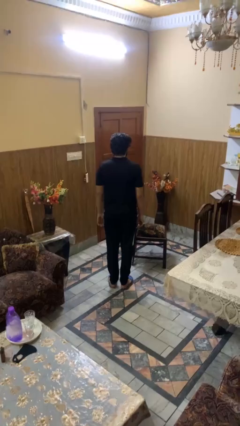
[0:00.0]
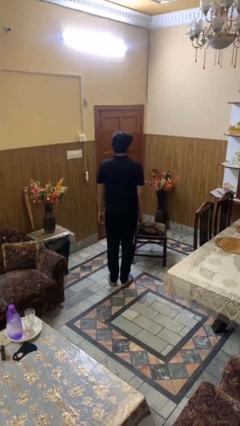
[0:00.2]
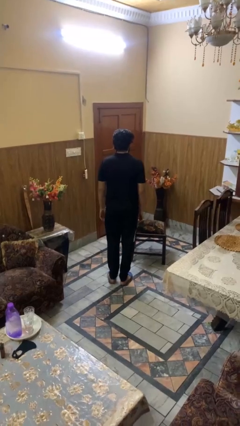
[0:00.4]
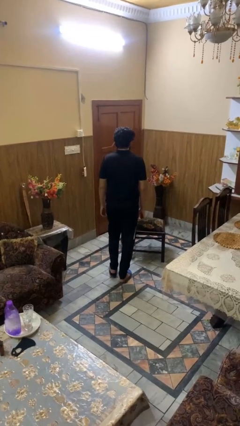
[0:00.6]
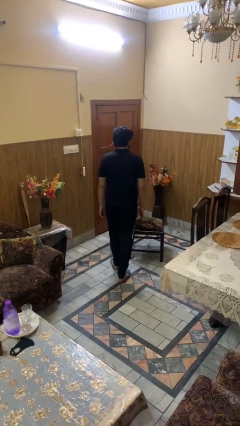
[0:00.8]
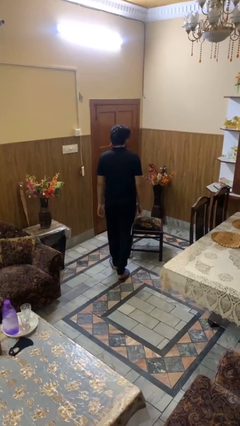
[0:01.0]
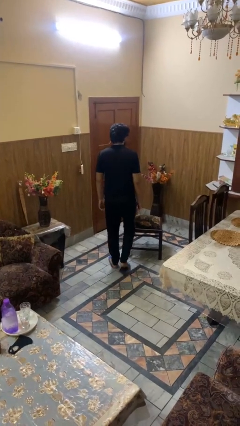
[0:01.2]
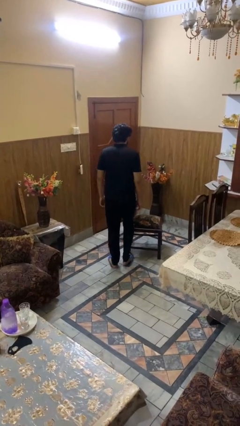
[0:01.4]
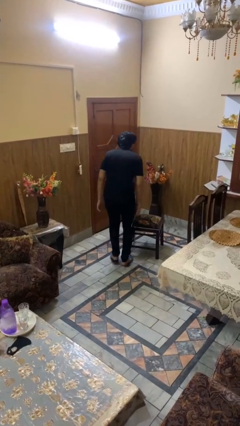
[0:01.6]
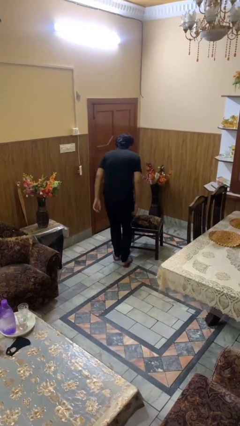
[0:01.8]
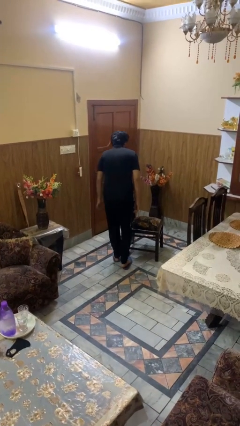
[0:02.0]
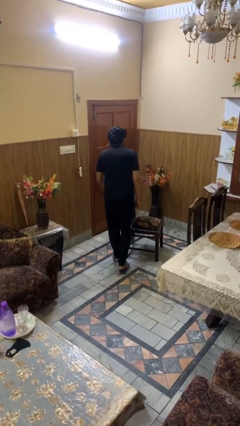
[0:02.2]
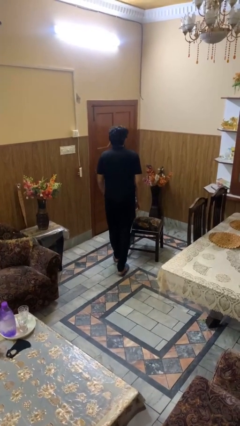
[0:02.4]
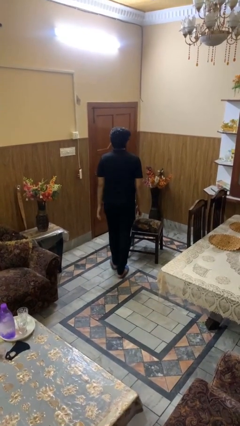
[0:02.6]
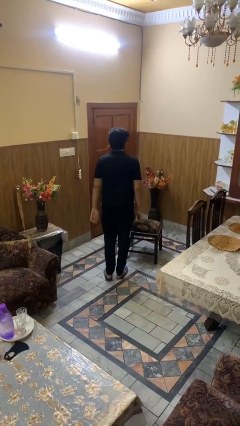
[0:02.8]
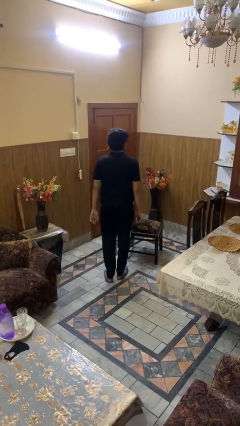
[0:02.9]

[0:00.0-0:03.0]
person stubs toe

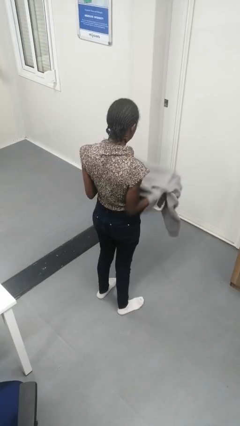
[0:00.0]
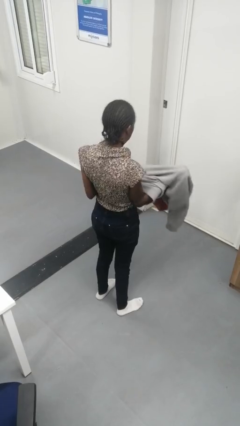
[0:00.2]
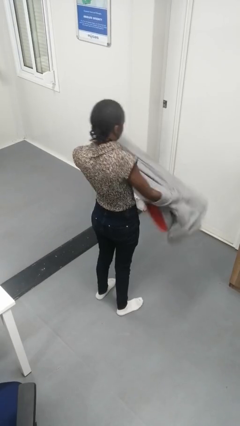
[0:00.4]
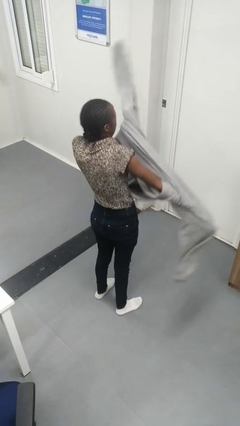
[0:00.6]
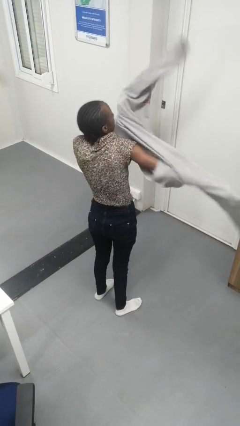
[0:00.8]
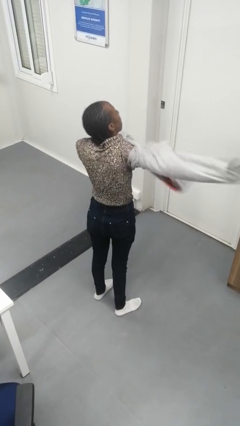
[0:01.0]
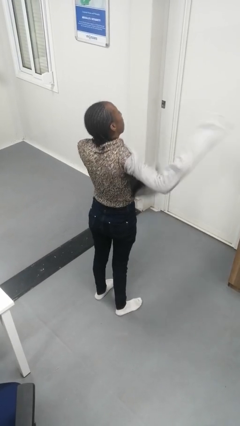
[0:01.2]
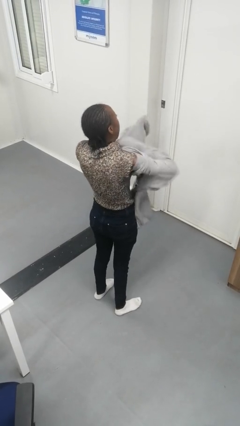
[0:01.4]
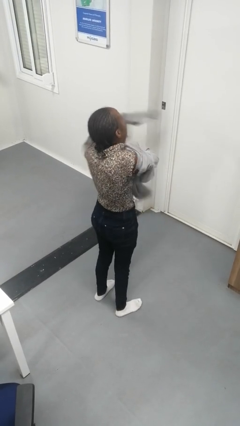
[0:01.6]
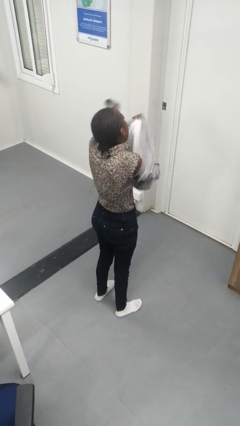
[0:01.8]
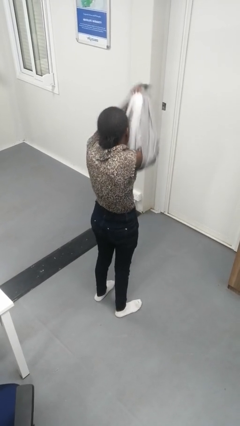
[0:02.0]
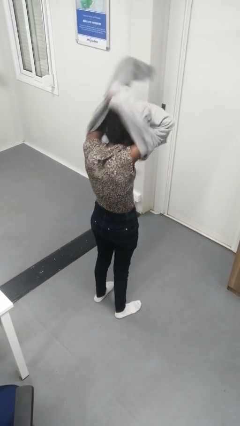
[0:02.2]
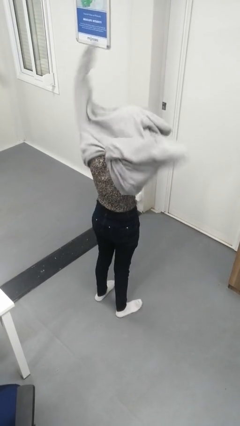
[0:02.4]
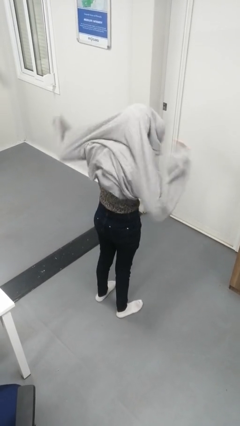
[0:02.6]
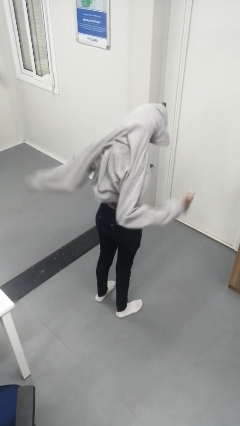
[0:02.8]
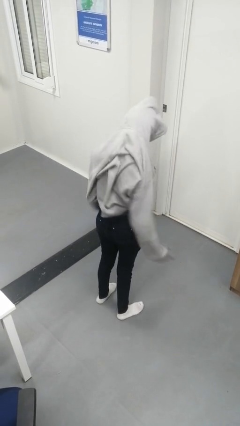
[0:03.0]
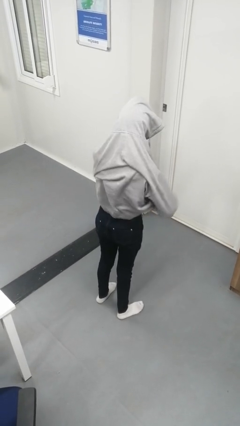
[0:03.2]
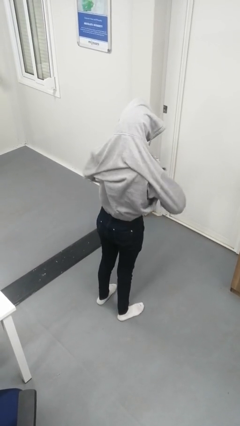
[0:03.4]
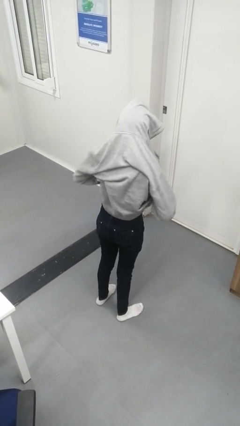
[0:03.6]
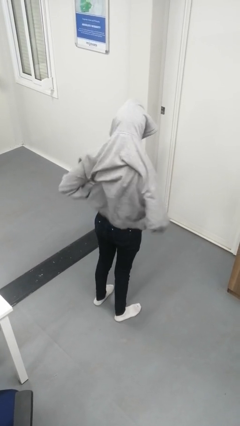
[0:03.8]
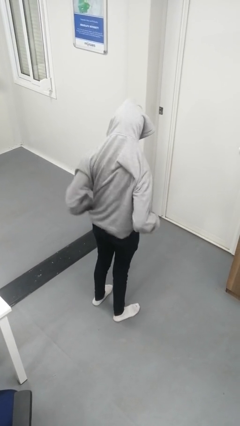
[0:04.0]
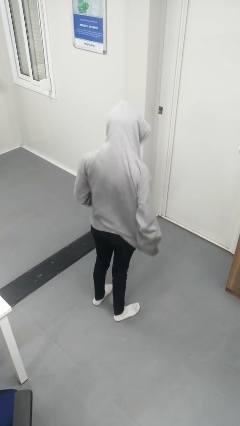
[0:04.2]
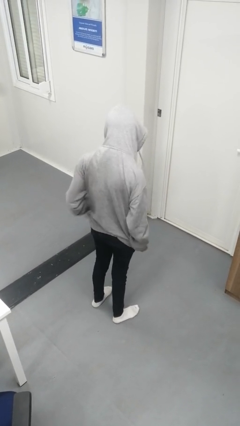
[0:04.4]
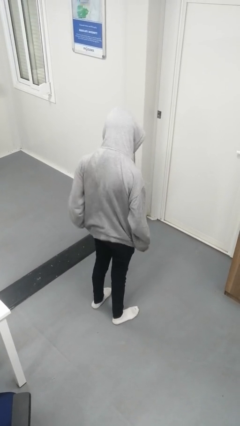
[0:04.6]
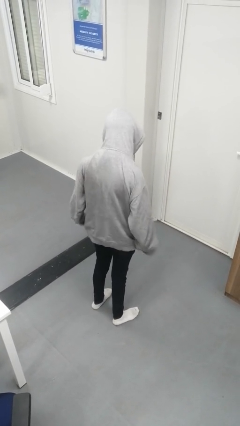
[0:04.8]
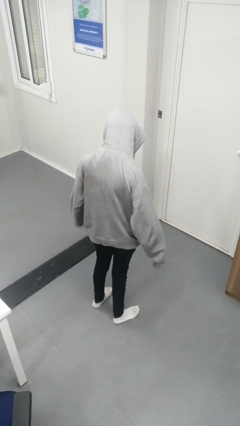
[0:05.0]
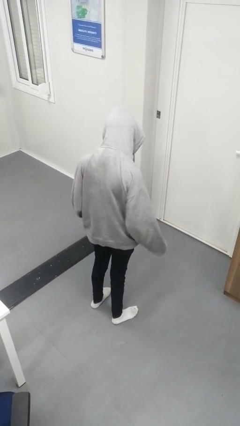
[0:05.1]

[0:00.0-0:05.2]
person puts on hoodie

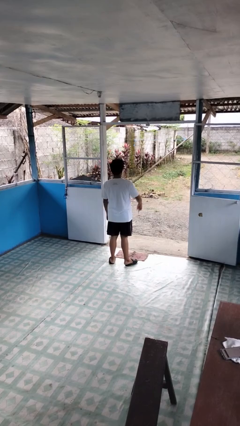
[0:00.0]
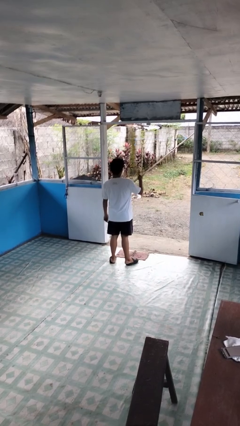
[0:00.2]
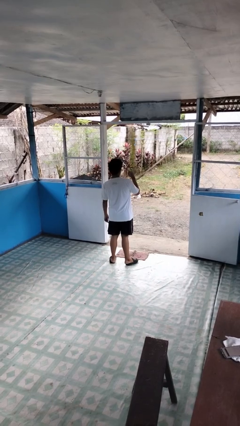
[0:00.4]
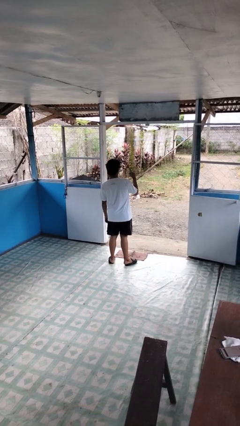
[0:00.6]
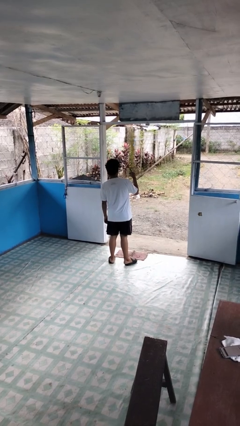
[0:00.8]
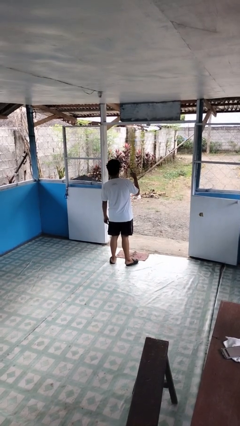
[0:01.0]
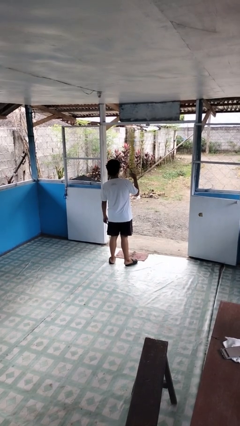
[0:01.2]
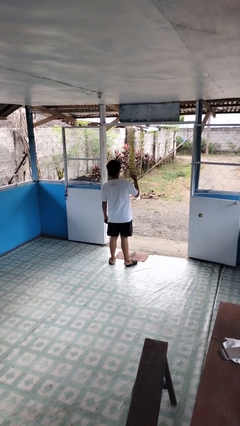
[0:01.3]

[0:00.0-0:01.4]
person gestures number one

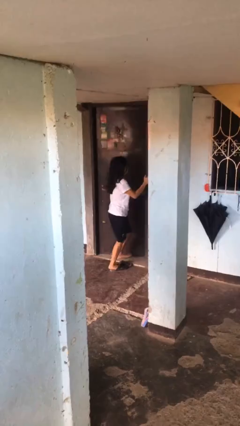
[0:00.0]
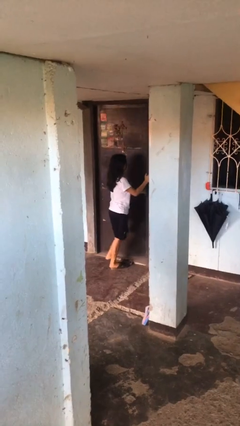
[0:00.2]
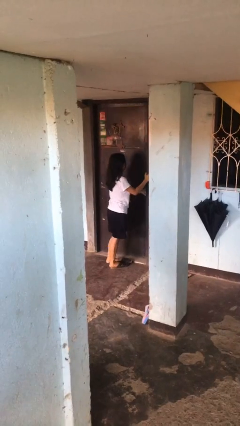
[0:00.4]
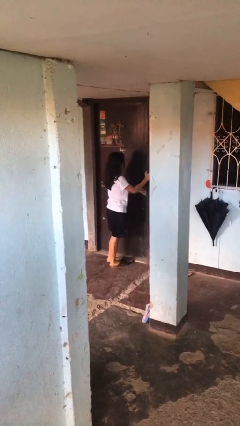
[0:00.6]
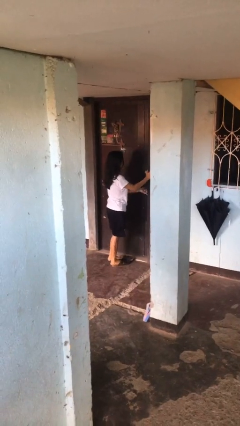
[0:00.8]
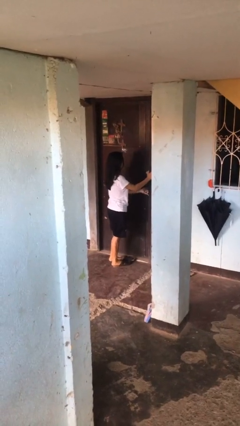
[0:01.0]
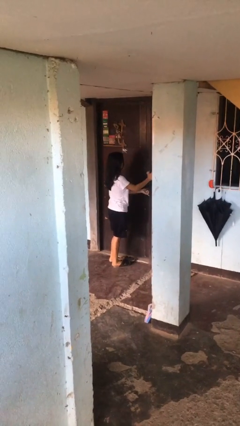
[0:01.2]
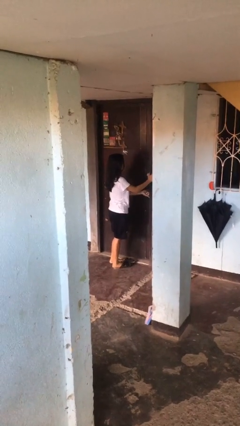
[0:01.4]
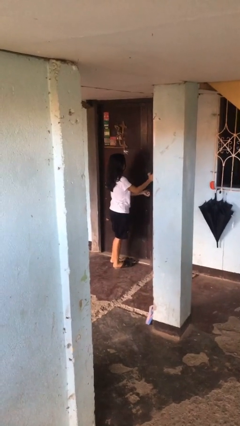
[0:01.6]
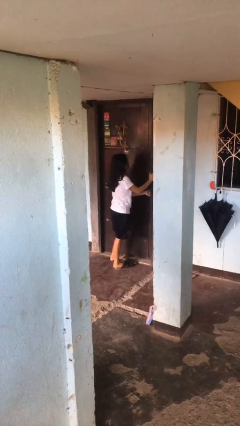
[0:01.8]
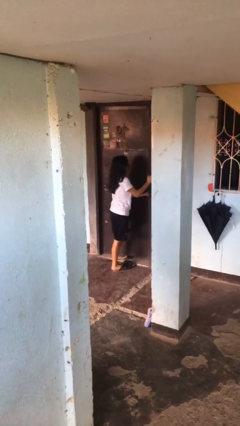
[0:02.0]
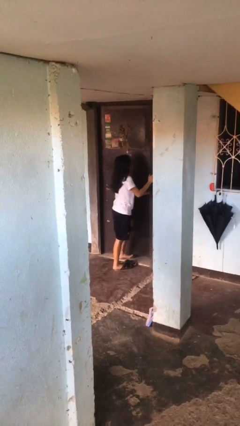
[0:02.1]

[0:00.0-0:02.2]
person closes facility door

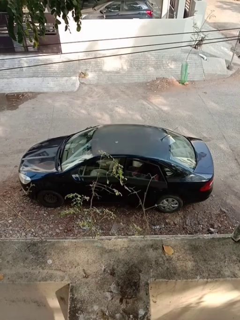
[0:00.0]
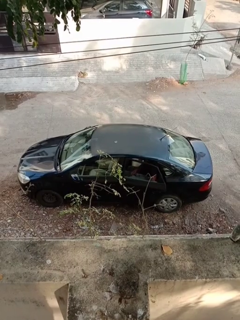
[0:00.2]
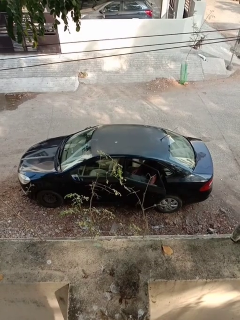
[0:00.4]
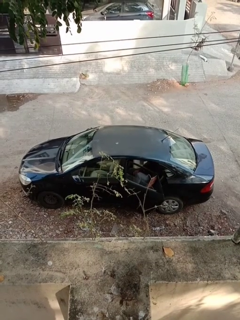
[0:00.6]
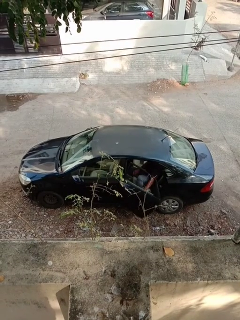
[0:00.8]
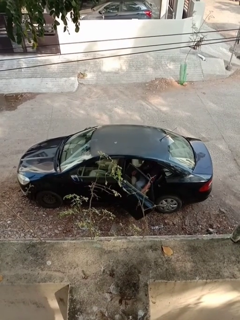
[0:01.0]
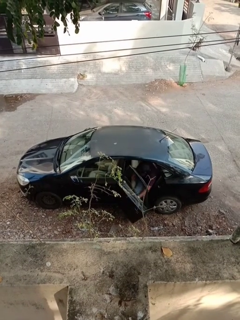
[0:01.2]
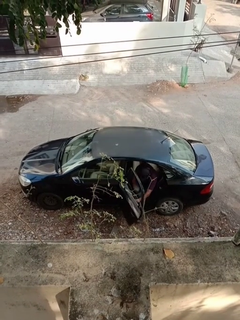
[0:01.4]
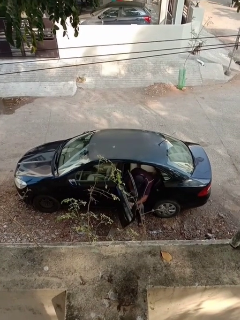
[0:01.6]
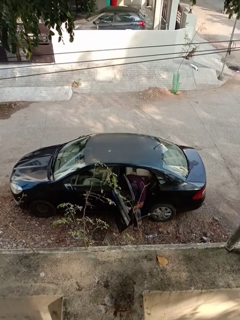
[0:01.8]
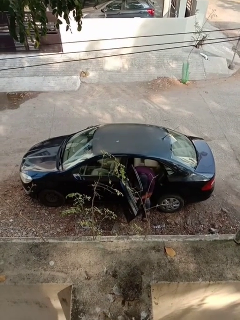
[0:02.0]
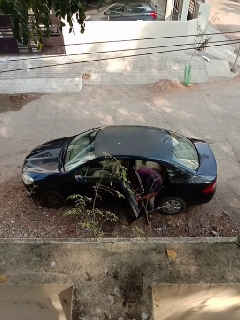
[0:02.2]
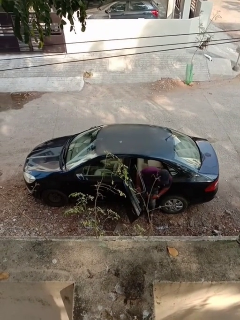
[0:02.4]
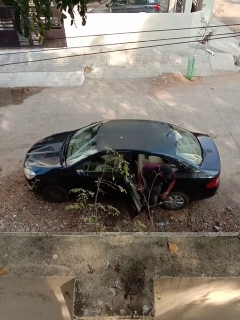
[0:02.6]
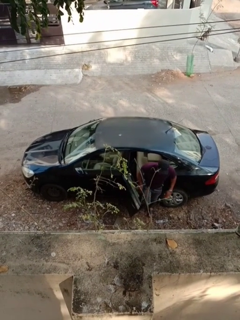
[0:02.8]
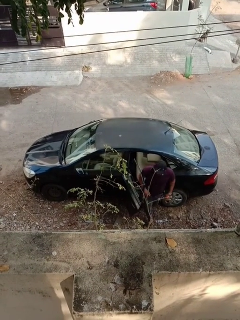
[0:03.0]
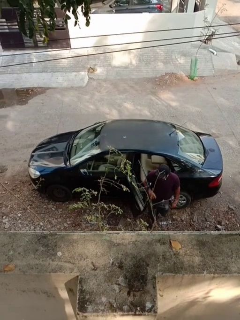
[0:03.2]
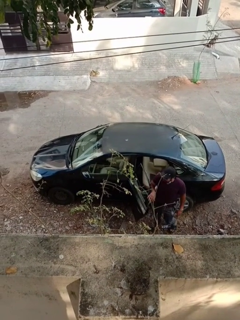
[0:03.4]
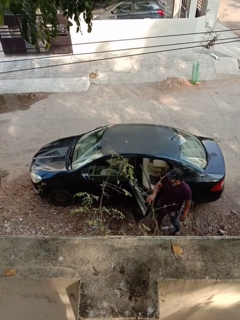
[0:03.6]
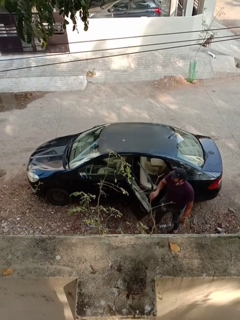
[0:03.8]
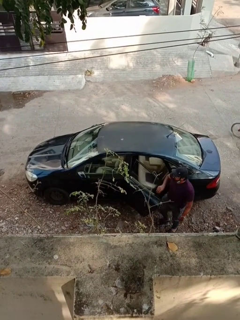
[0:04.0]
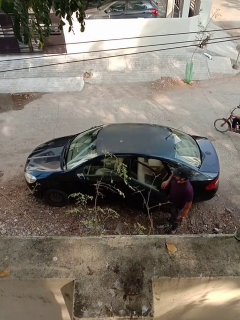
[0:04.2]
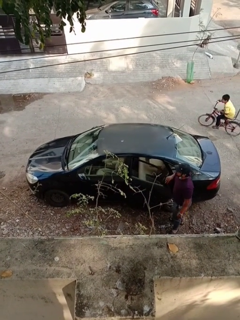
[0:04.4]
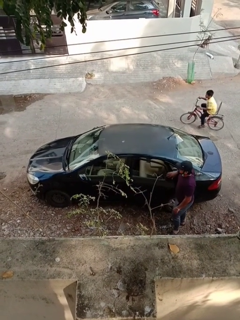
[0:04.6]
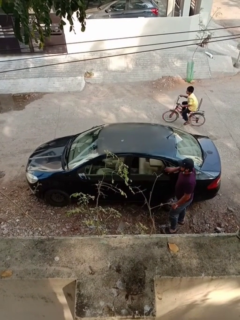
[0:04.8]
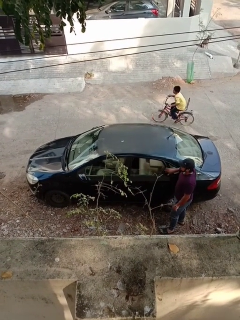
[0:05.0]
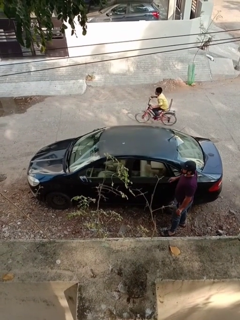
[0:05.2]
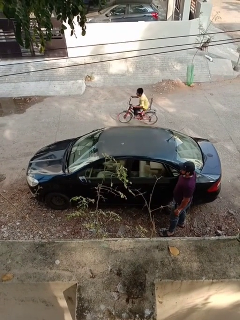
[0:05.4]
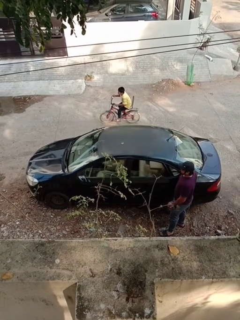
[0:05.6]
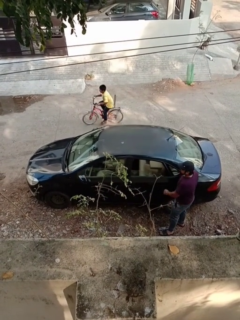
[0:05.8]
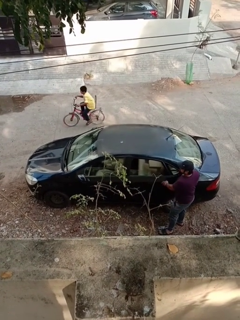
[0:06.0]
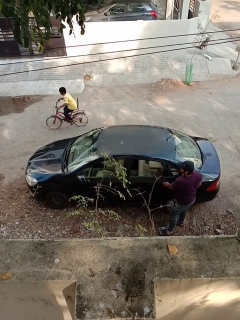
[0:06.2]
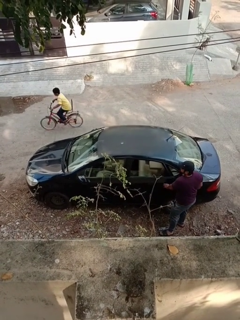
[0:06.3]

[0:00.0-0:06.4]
car drops off person

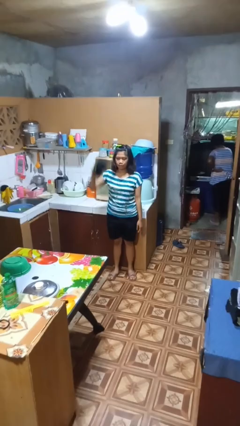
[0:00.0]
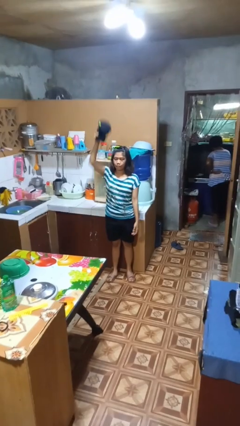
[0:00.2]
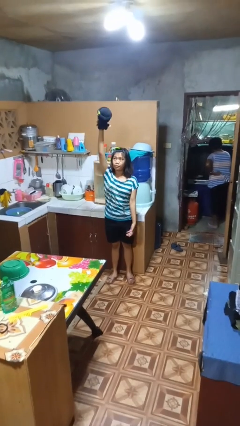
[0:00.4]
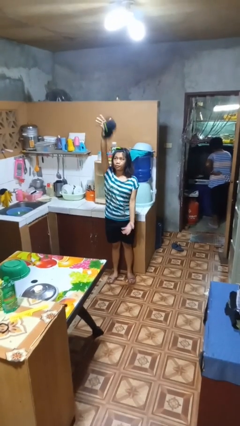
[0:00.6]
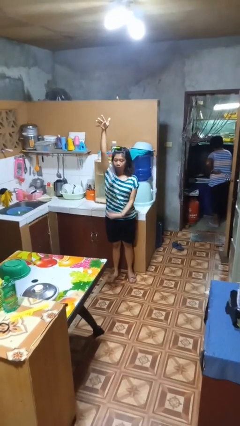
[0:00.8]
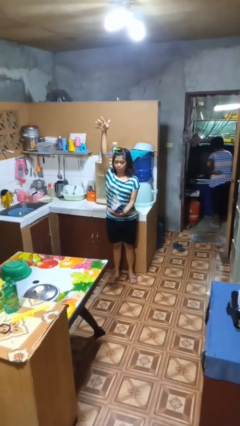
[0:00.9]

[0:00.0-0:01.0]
person drops object
